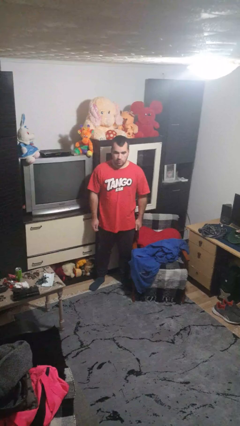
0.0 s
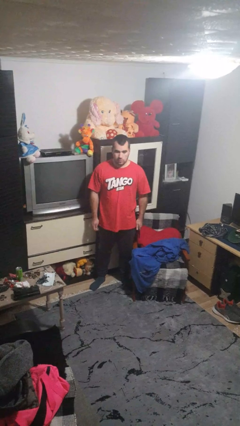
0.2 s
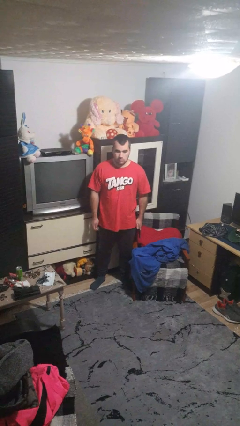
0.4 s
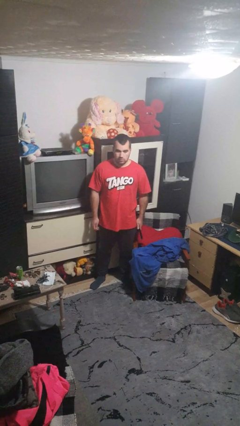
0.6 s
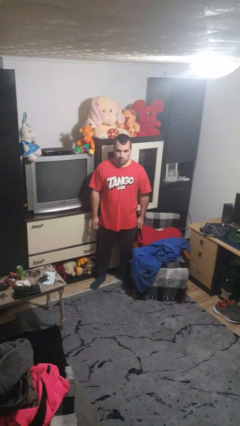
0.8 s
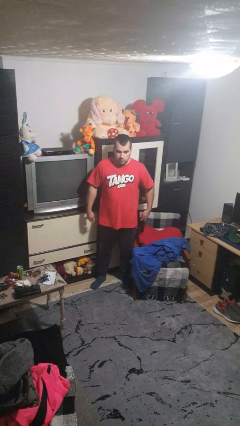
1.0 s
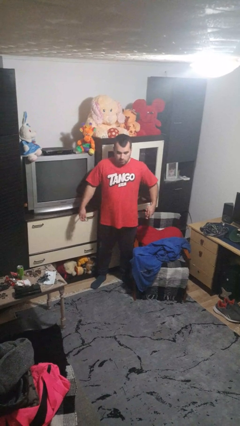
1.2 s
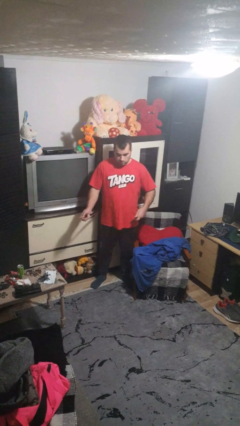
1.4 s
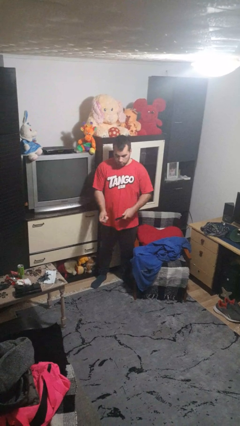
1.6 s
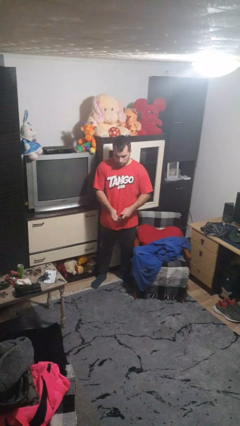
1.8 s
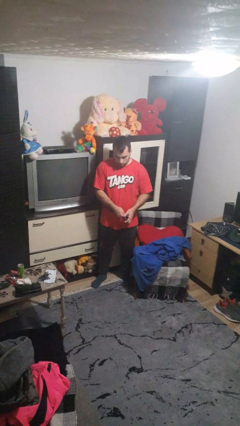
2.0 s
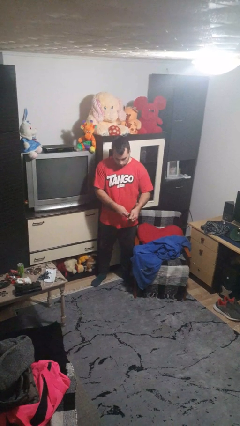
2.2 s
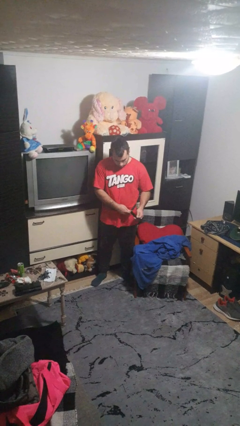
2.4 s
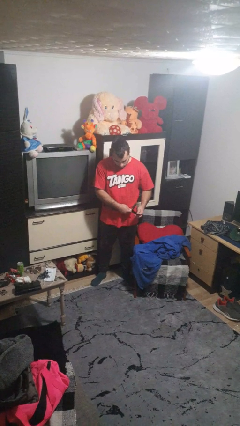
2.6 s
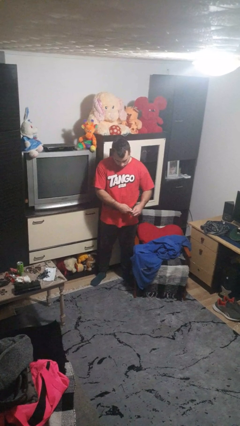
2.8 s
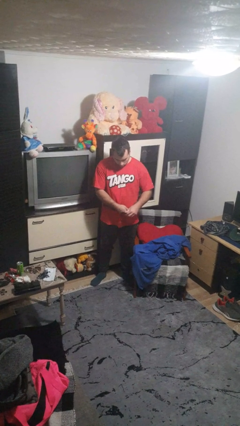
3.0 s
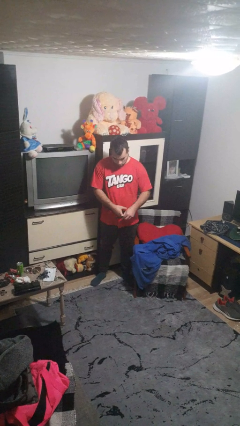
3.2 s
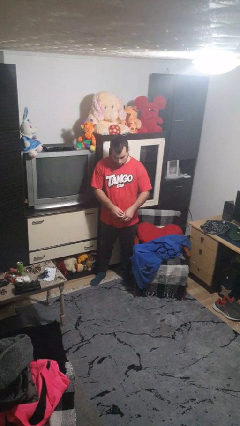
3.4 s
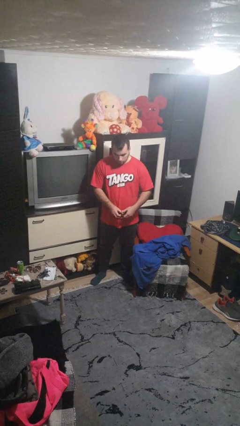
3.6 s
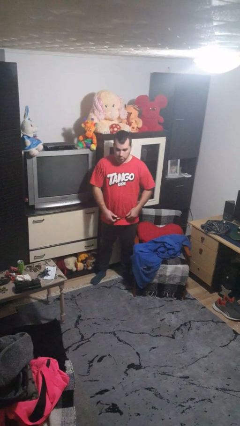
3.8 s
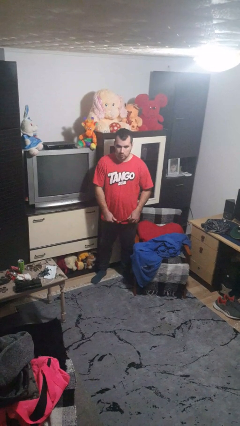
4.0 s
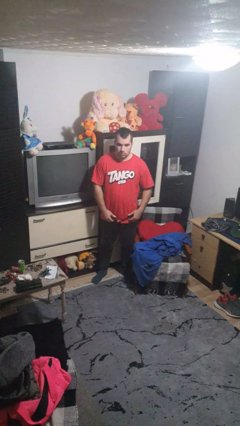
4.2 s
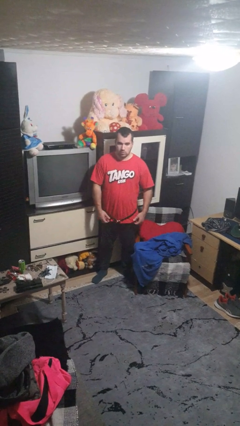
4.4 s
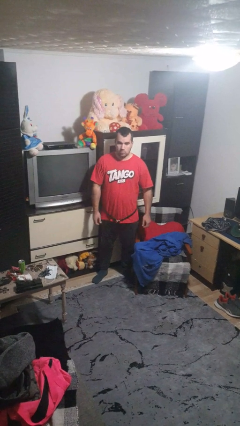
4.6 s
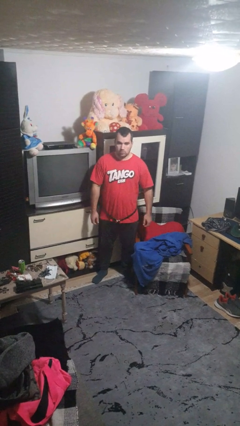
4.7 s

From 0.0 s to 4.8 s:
person puts on belt

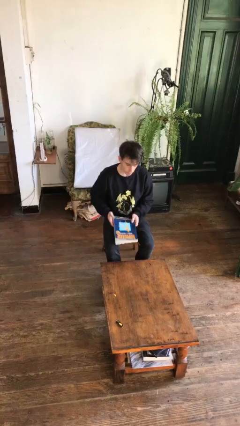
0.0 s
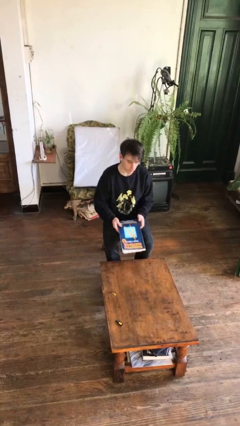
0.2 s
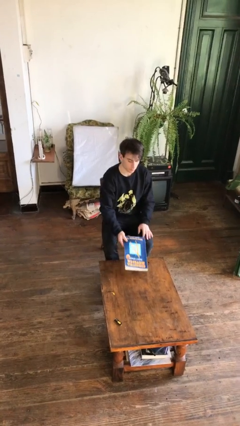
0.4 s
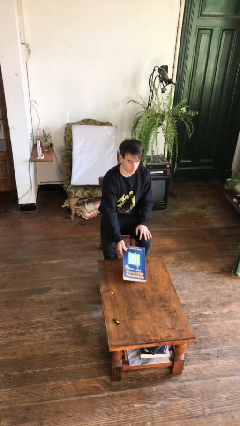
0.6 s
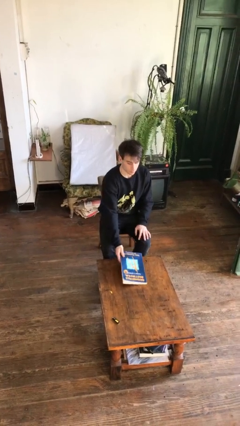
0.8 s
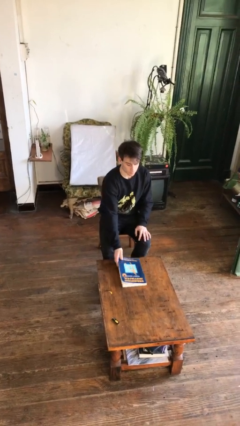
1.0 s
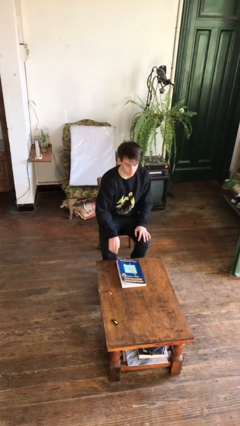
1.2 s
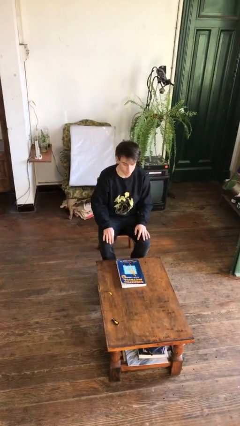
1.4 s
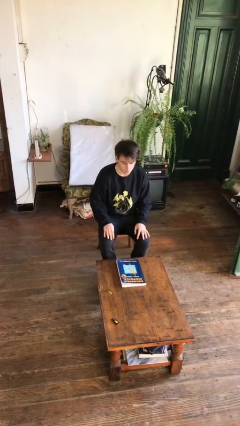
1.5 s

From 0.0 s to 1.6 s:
person puts down object on table

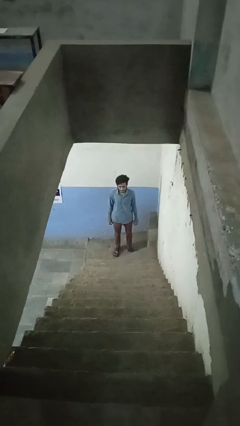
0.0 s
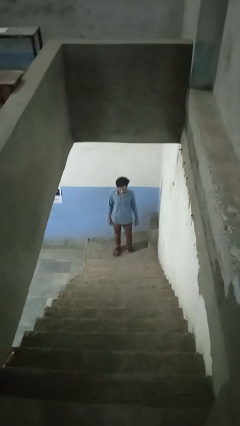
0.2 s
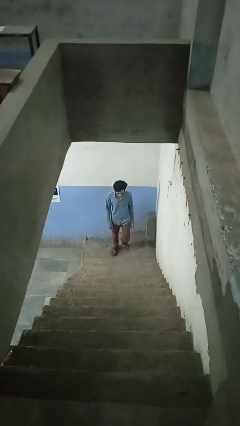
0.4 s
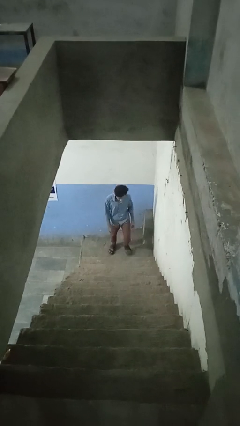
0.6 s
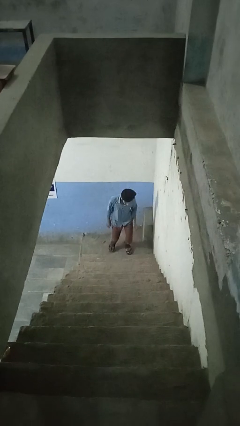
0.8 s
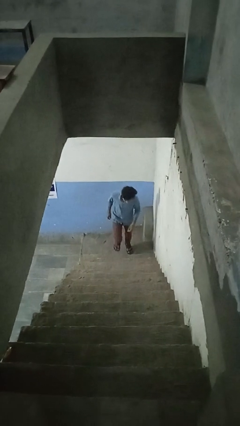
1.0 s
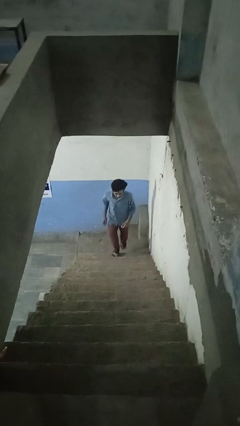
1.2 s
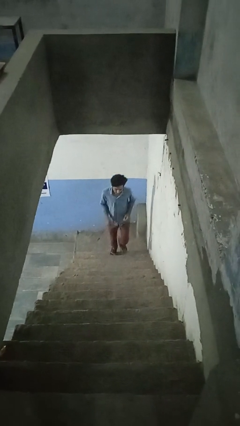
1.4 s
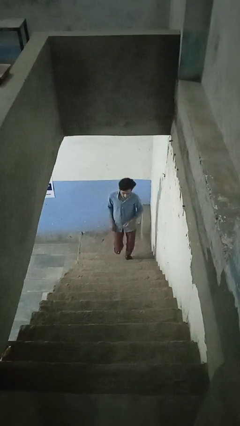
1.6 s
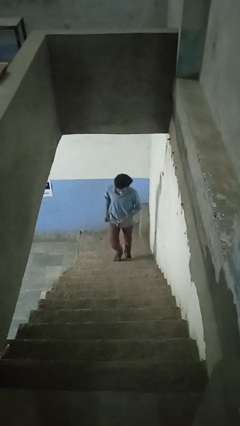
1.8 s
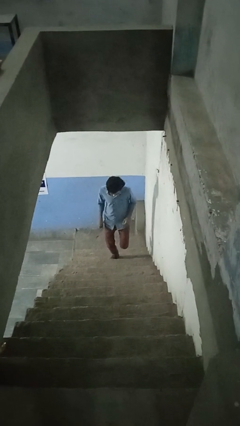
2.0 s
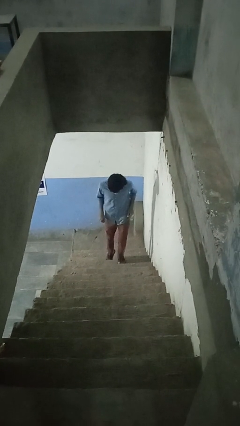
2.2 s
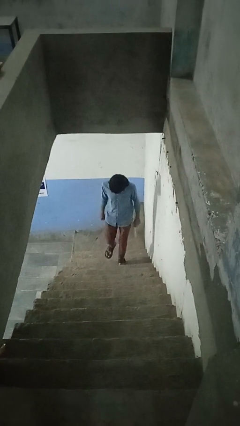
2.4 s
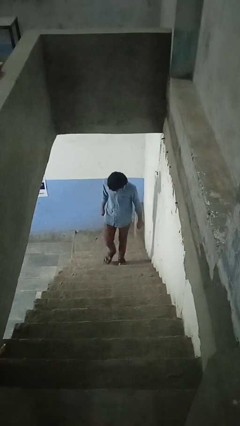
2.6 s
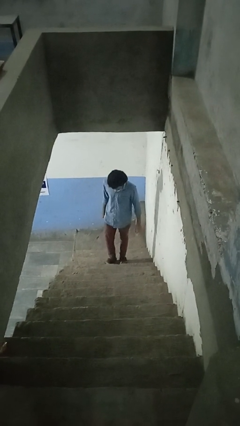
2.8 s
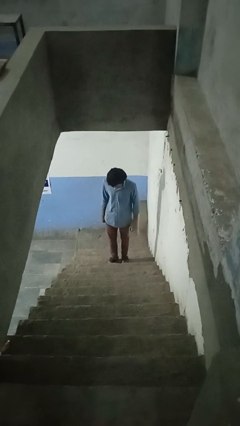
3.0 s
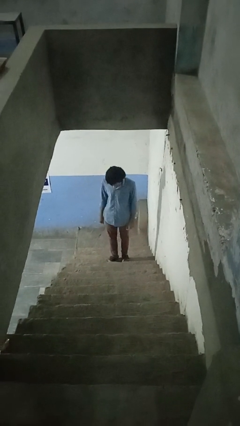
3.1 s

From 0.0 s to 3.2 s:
person climbs up stairs

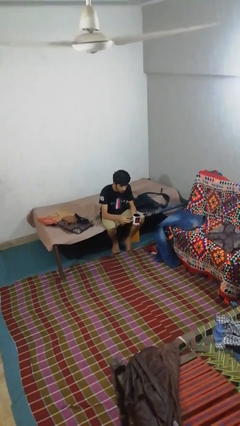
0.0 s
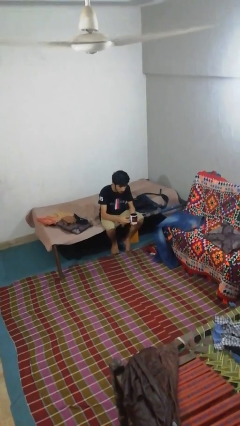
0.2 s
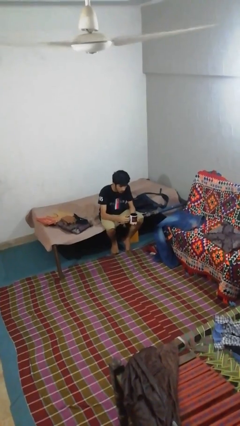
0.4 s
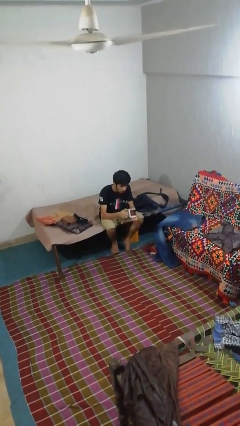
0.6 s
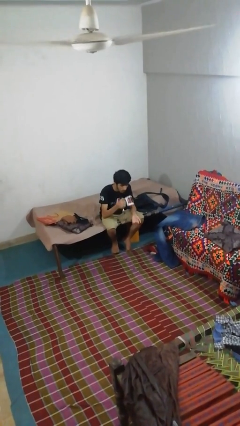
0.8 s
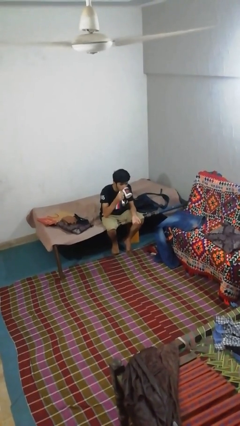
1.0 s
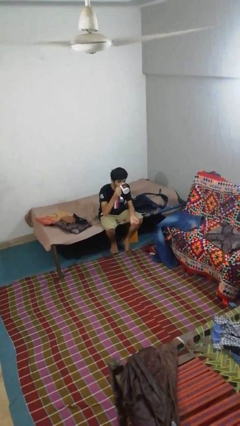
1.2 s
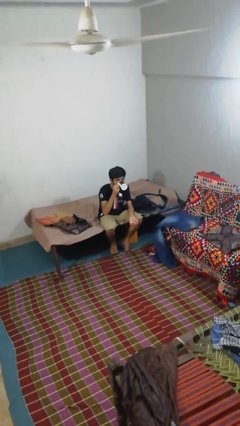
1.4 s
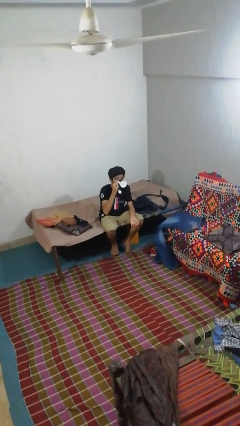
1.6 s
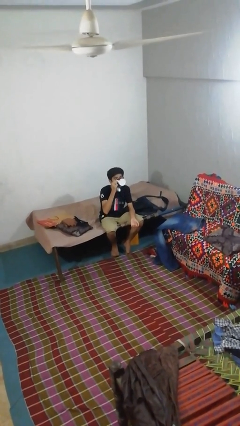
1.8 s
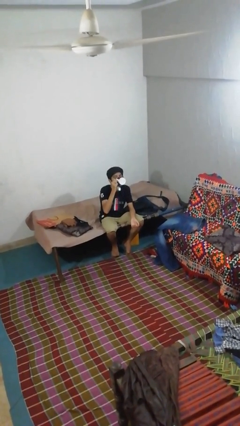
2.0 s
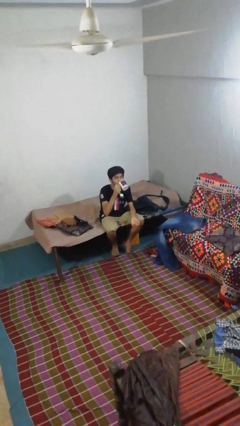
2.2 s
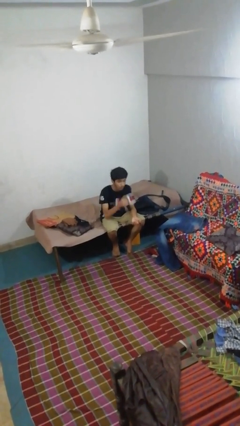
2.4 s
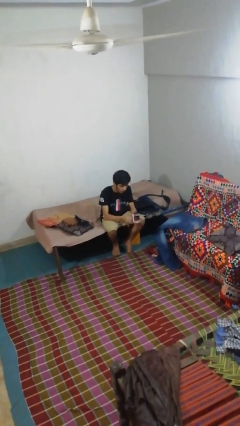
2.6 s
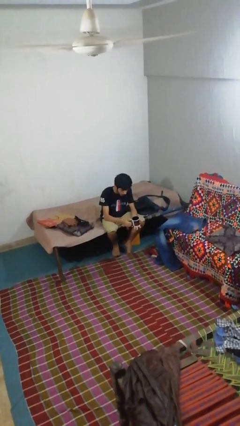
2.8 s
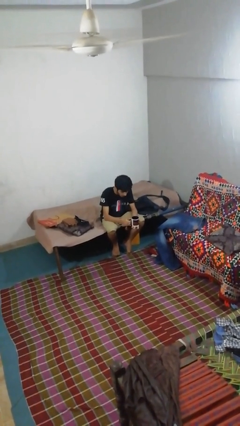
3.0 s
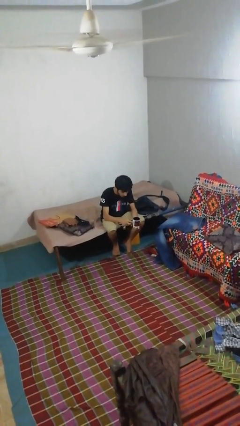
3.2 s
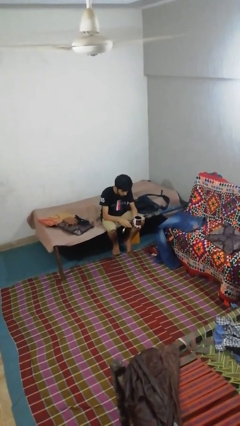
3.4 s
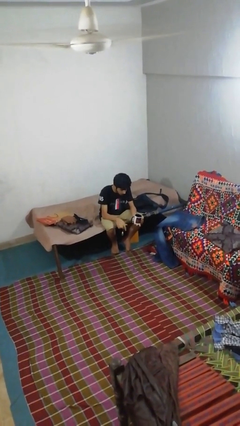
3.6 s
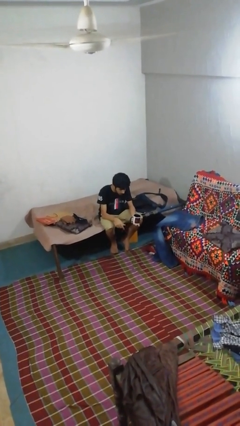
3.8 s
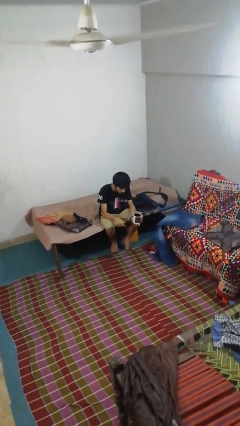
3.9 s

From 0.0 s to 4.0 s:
person drinks from mug

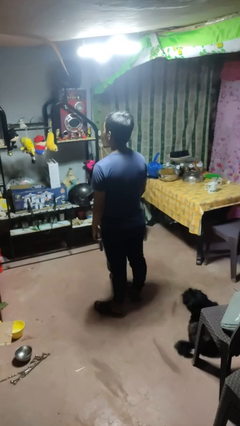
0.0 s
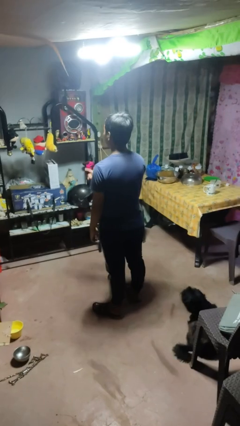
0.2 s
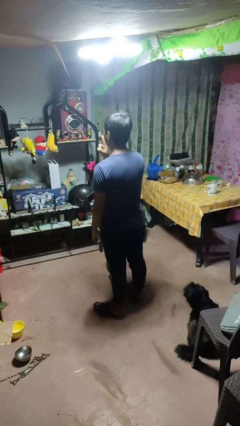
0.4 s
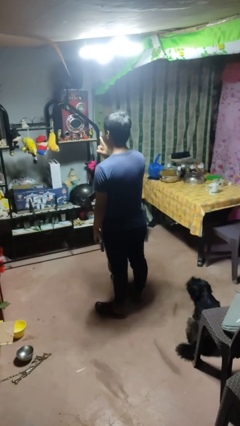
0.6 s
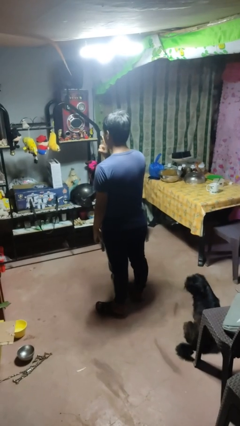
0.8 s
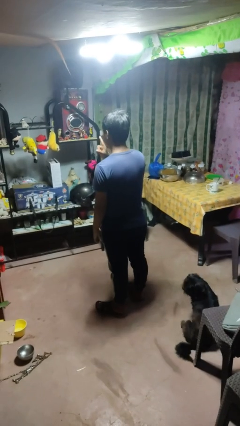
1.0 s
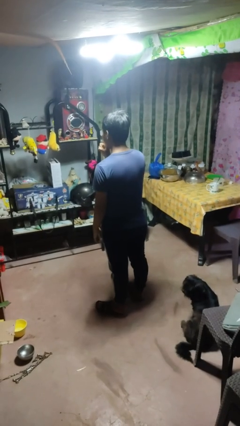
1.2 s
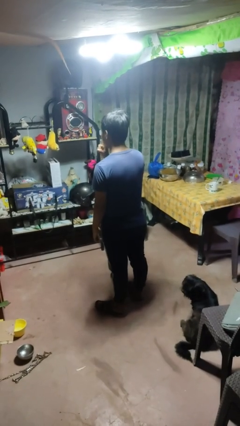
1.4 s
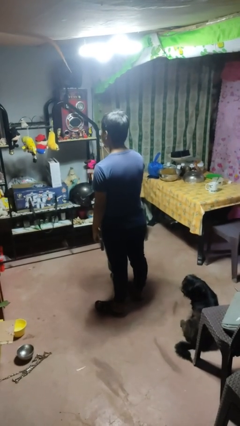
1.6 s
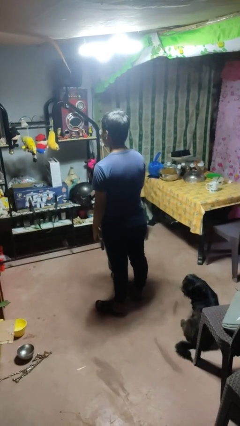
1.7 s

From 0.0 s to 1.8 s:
person gestures be quiet

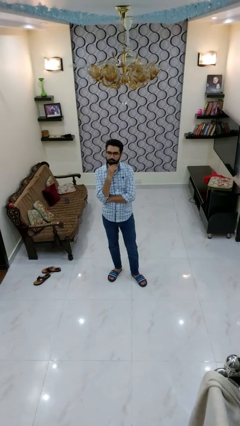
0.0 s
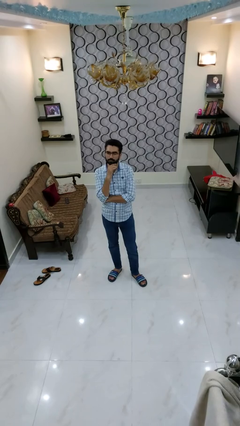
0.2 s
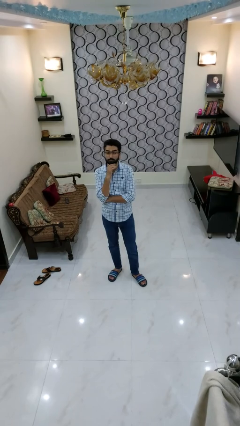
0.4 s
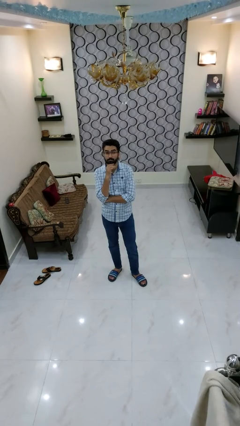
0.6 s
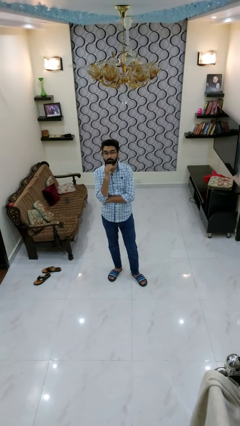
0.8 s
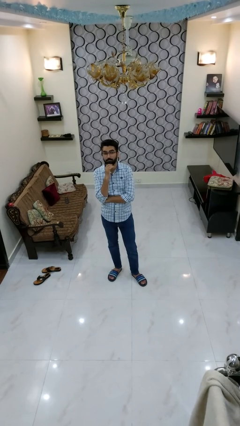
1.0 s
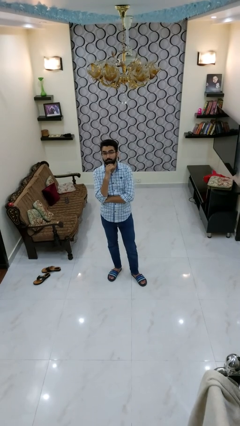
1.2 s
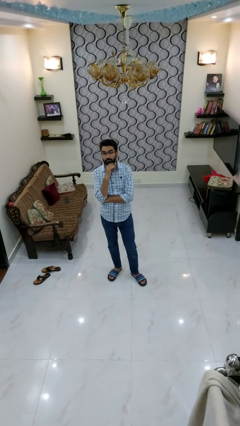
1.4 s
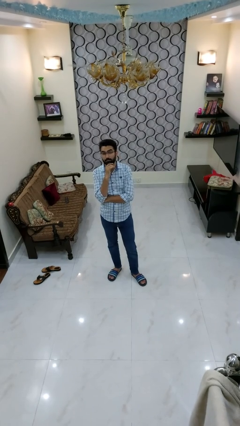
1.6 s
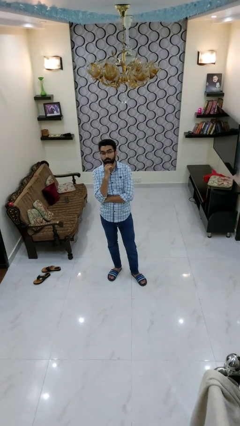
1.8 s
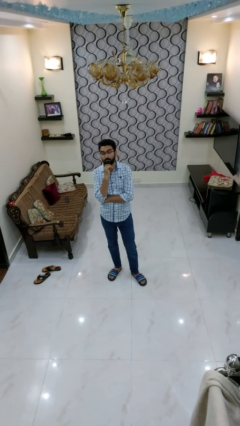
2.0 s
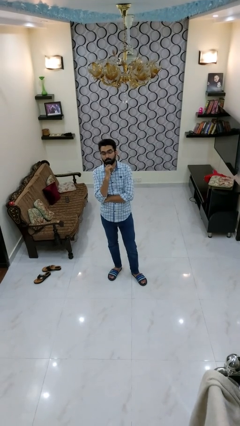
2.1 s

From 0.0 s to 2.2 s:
person strokes chin
